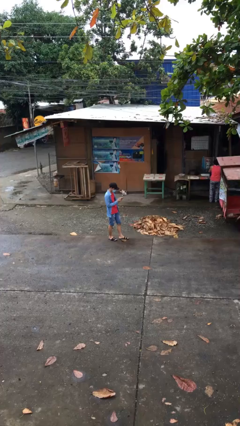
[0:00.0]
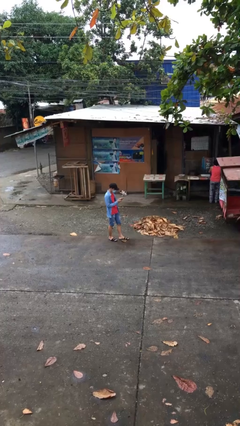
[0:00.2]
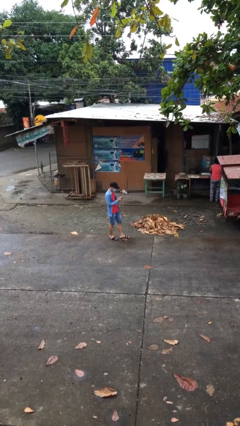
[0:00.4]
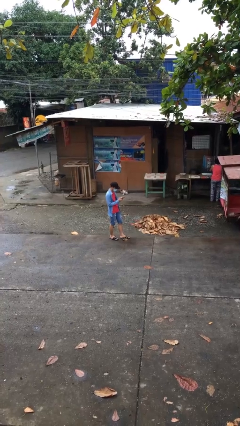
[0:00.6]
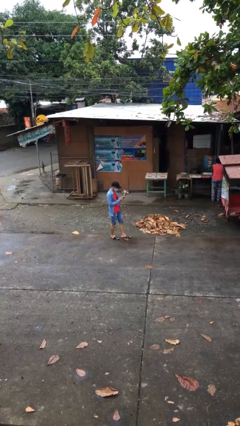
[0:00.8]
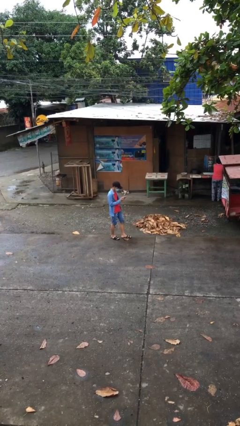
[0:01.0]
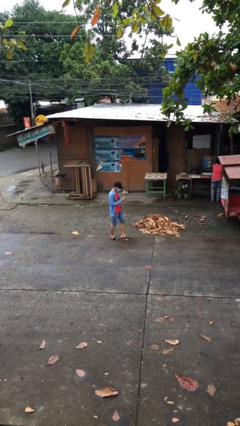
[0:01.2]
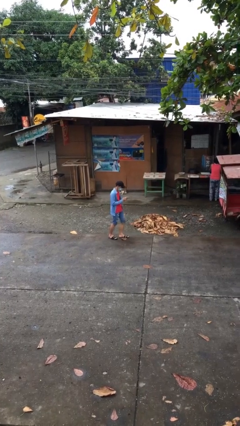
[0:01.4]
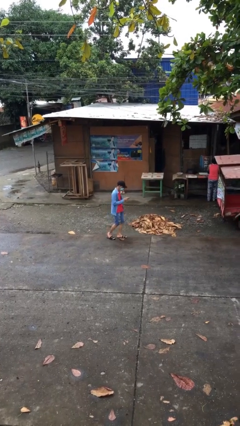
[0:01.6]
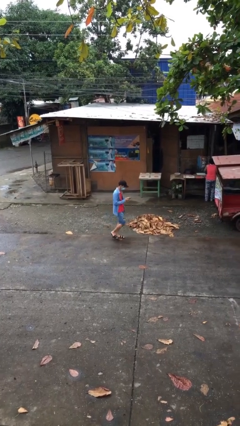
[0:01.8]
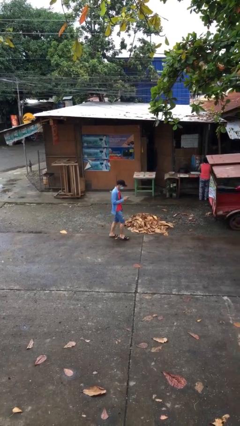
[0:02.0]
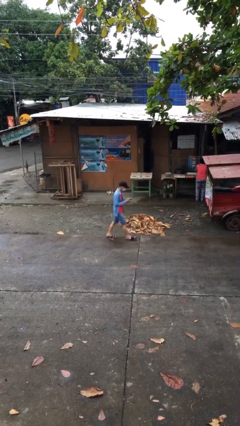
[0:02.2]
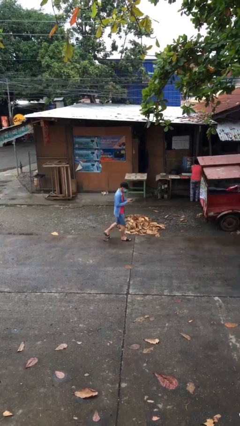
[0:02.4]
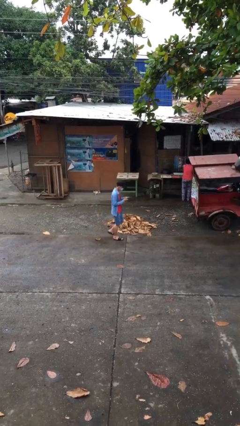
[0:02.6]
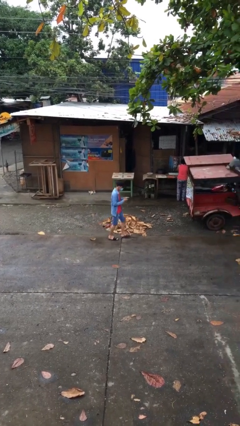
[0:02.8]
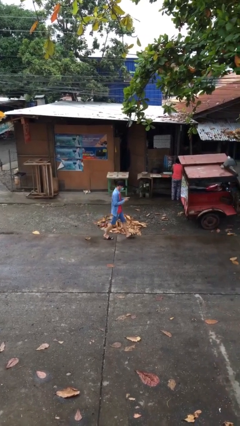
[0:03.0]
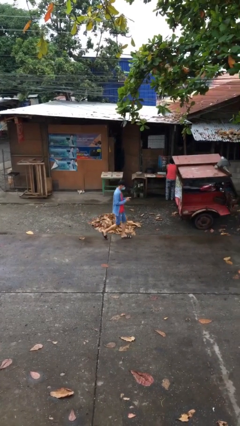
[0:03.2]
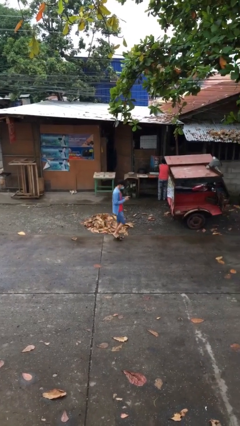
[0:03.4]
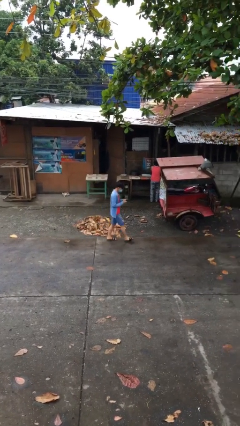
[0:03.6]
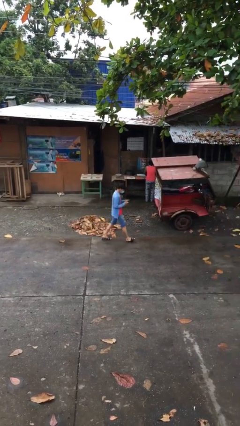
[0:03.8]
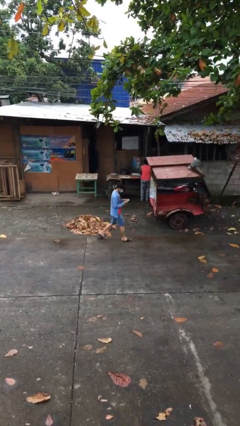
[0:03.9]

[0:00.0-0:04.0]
person texts on phone

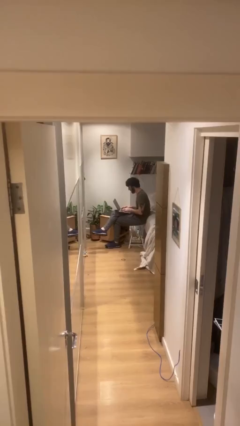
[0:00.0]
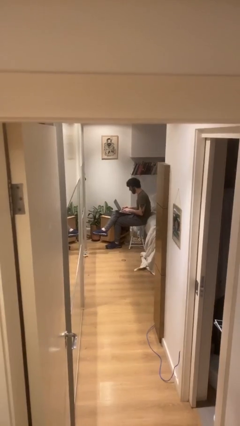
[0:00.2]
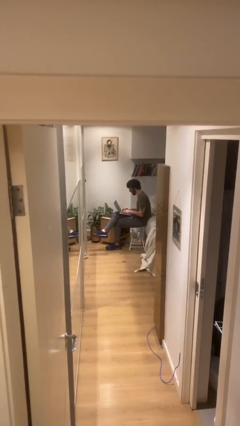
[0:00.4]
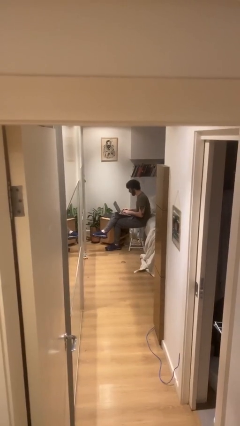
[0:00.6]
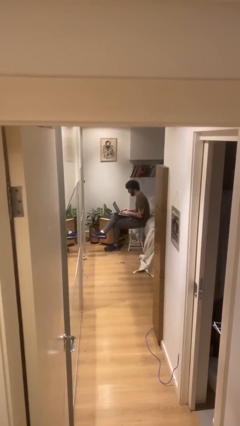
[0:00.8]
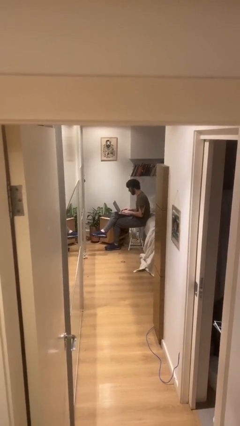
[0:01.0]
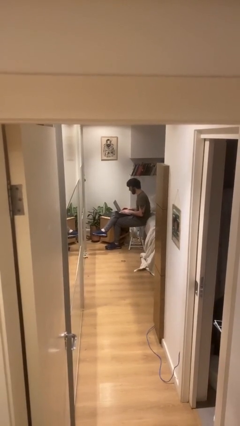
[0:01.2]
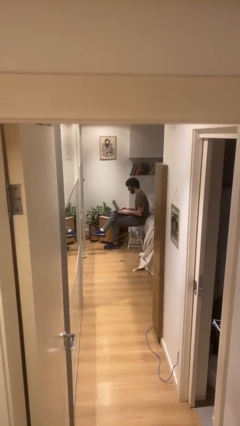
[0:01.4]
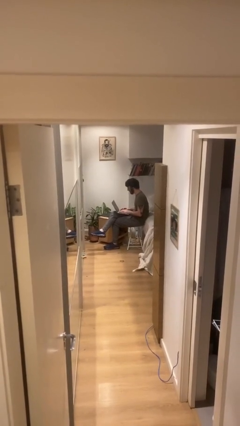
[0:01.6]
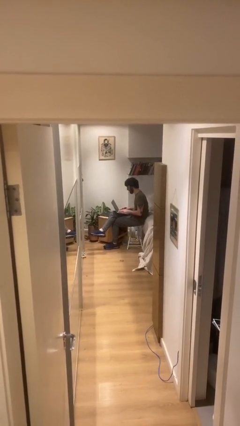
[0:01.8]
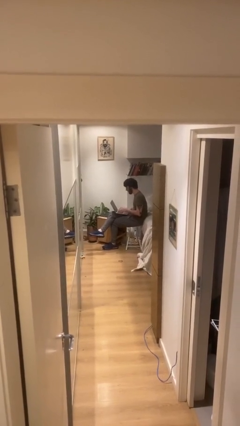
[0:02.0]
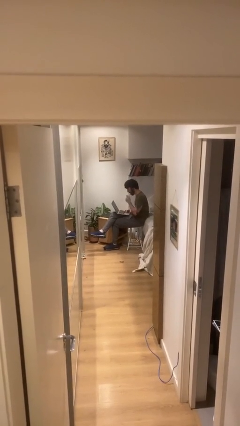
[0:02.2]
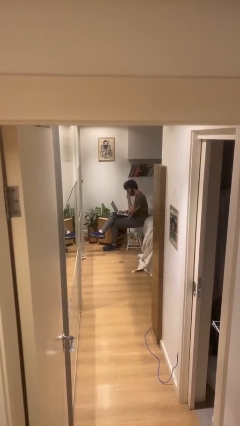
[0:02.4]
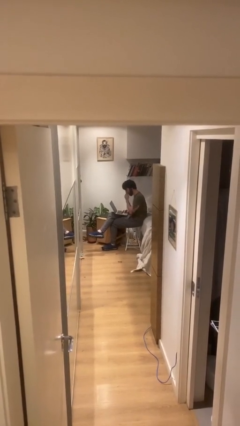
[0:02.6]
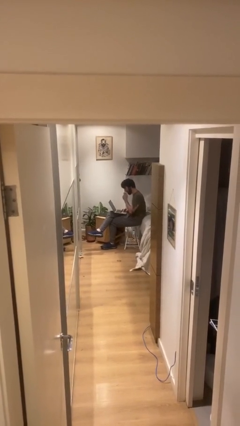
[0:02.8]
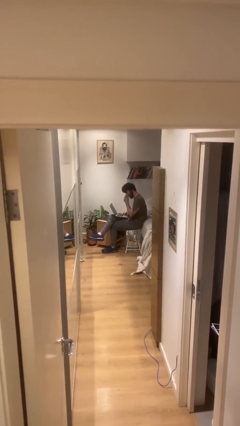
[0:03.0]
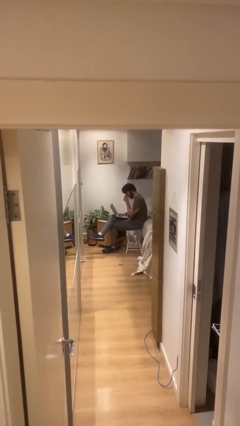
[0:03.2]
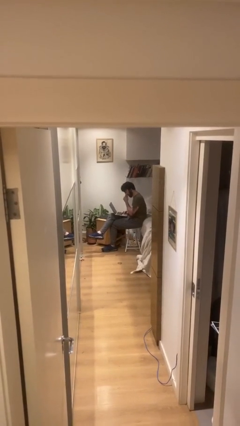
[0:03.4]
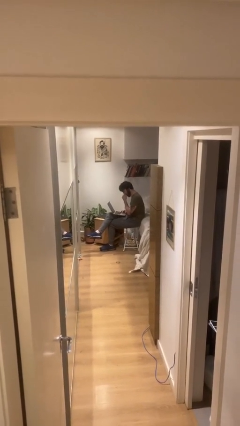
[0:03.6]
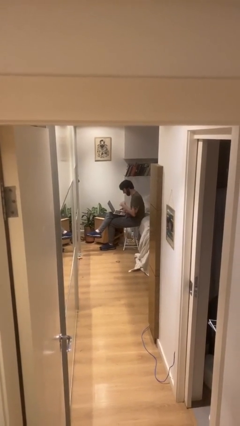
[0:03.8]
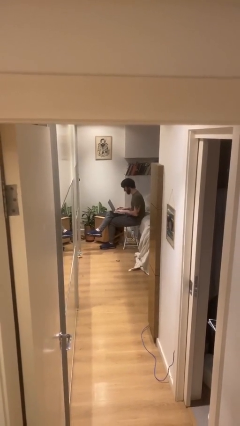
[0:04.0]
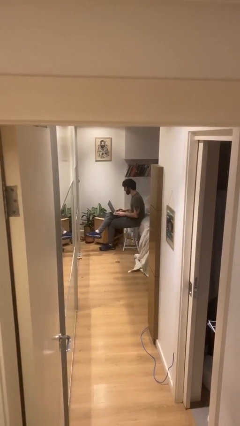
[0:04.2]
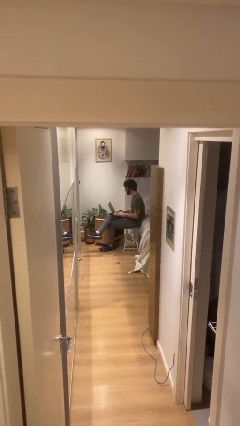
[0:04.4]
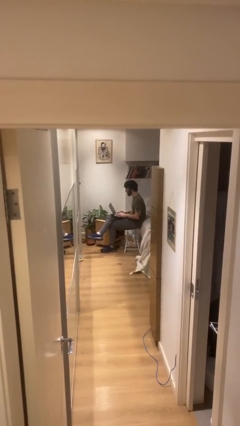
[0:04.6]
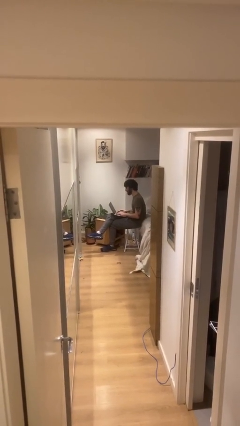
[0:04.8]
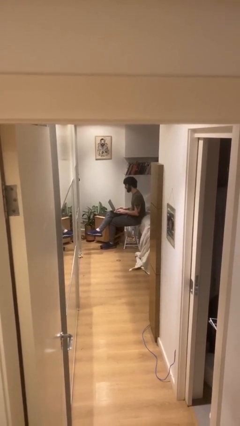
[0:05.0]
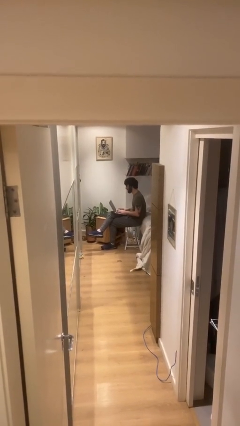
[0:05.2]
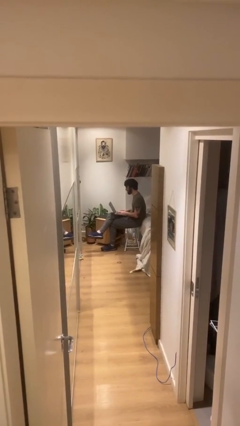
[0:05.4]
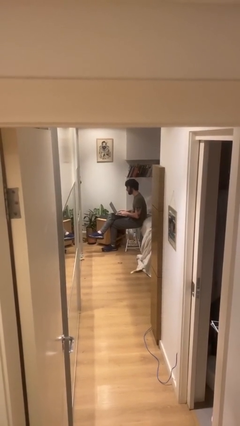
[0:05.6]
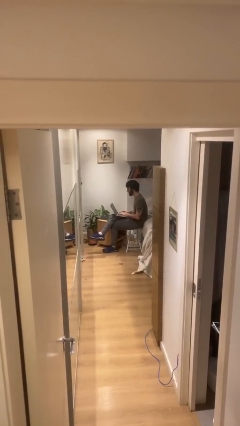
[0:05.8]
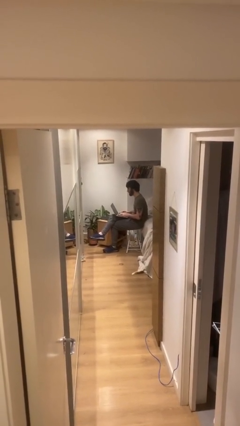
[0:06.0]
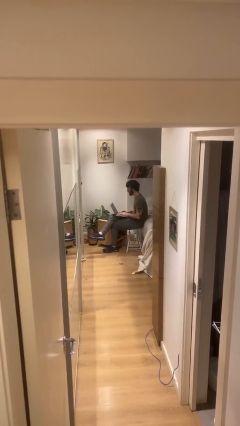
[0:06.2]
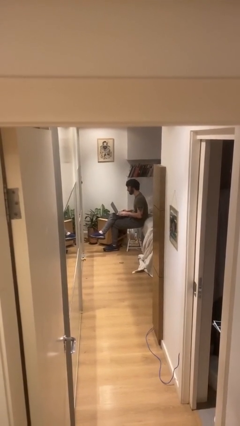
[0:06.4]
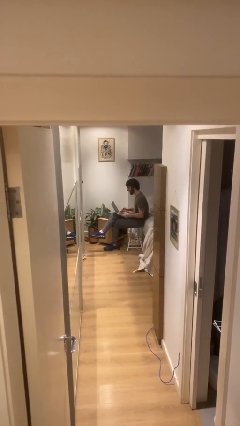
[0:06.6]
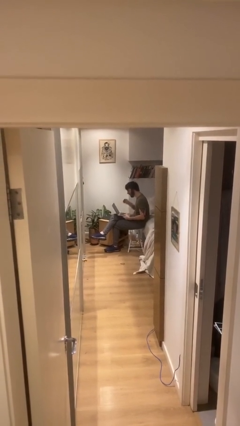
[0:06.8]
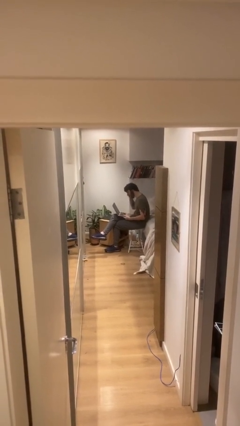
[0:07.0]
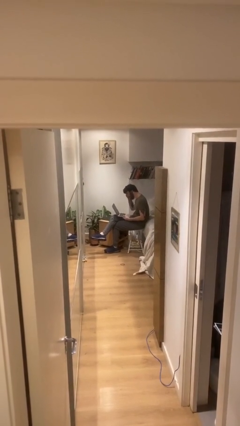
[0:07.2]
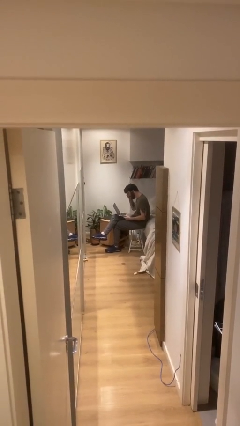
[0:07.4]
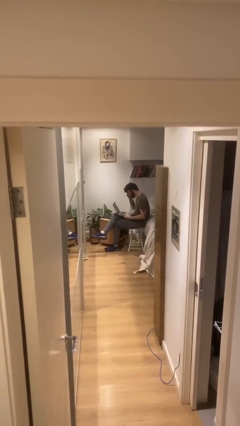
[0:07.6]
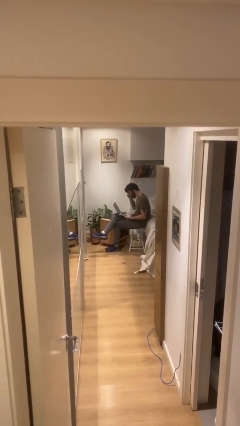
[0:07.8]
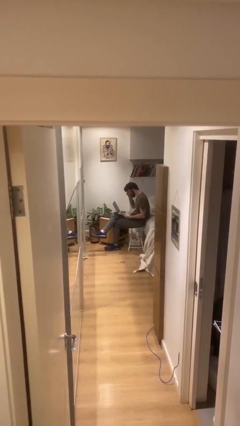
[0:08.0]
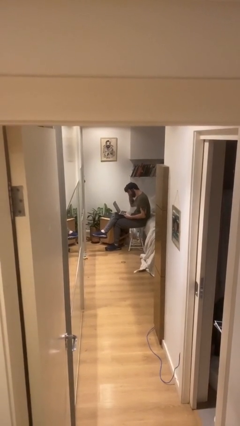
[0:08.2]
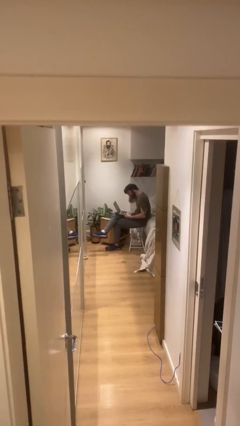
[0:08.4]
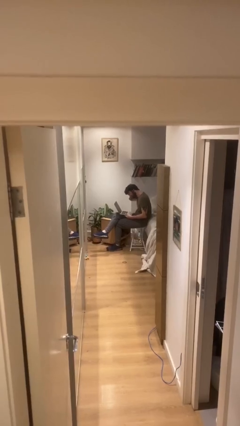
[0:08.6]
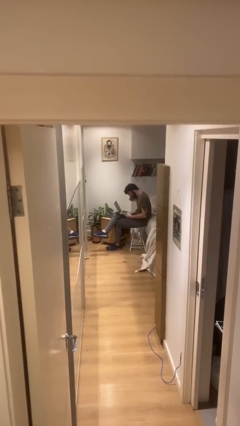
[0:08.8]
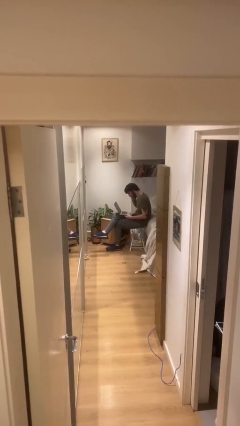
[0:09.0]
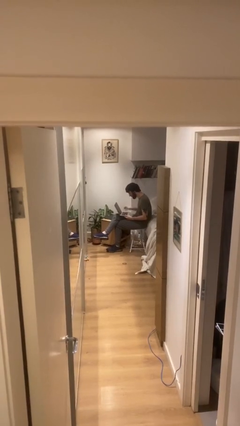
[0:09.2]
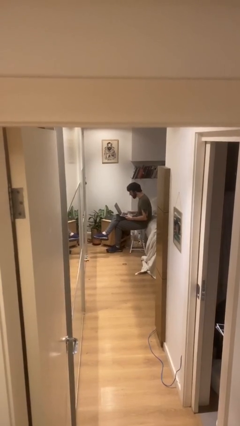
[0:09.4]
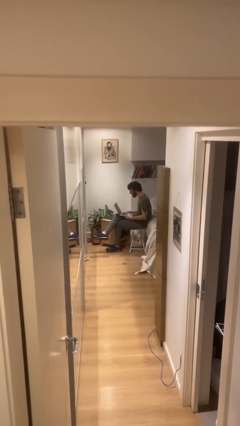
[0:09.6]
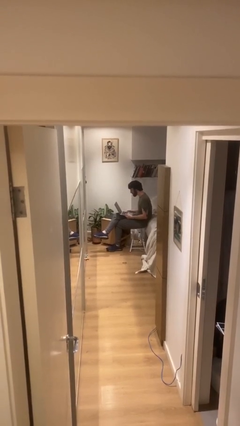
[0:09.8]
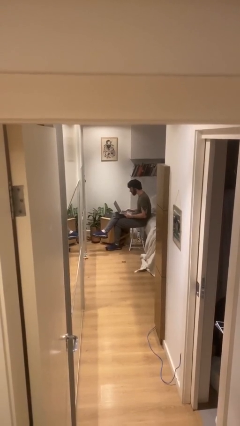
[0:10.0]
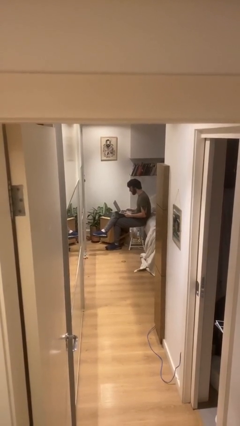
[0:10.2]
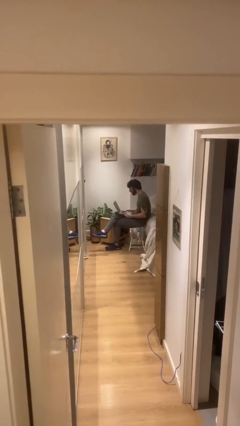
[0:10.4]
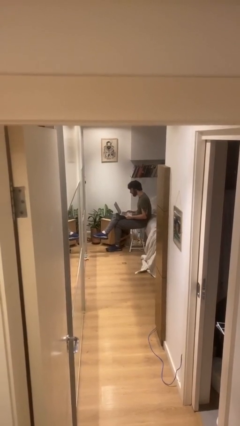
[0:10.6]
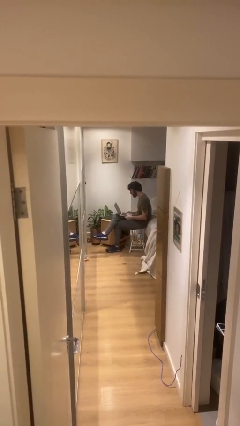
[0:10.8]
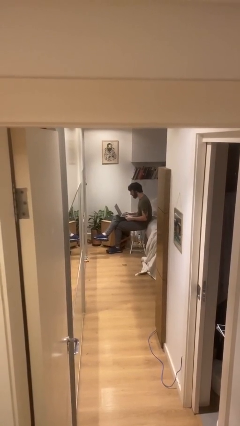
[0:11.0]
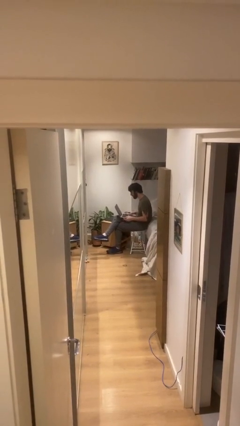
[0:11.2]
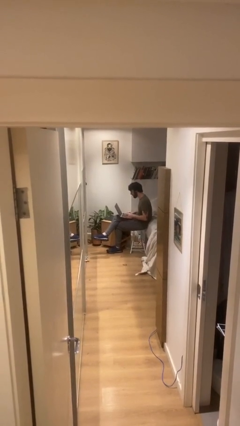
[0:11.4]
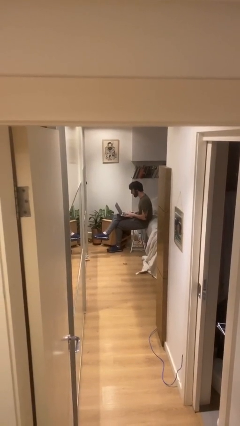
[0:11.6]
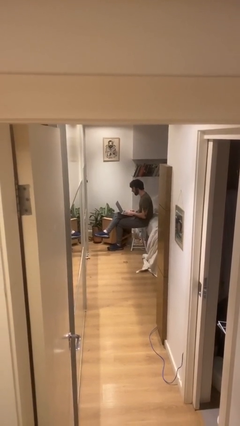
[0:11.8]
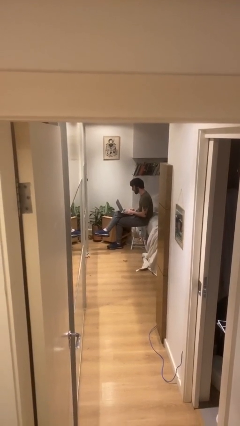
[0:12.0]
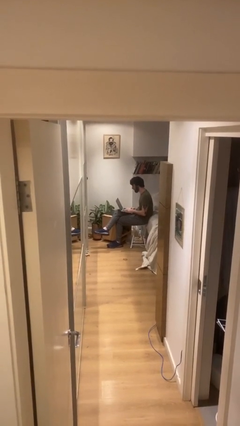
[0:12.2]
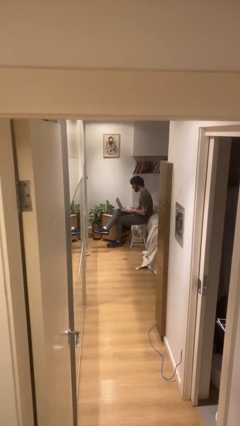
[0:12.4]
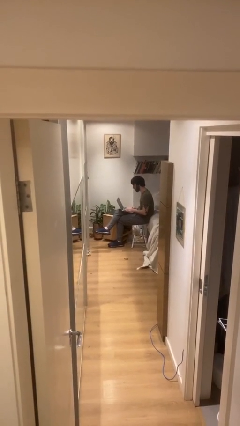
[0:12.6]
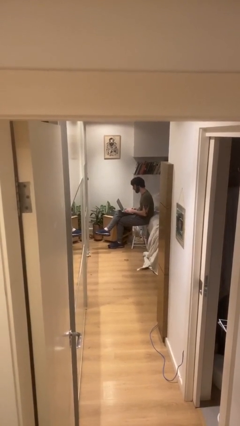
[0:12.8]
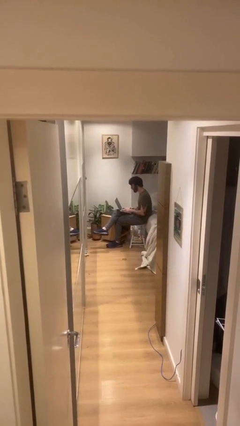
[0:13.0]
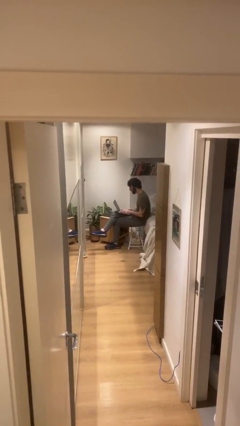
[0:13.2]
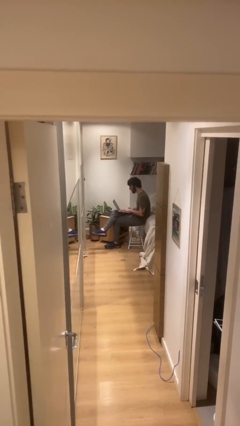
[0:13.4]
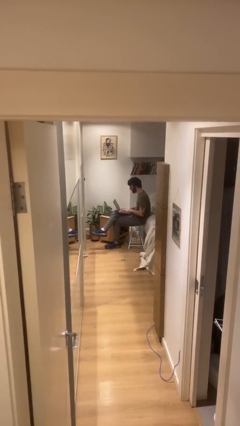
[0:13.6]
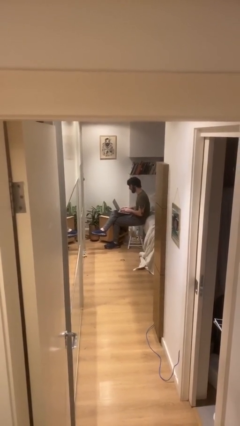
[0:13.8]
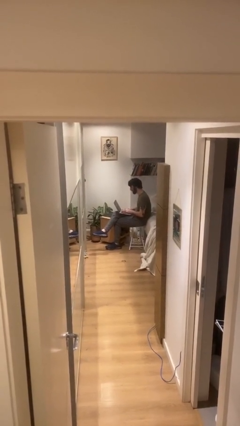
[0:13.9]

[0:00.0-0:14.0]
person interacts with laptop
